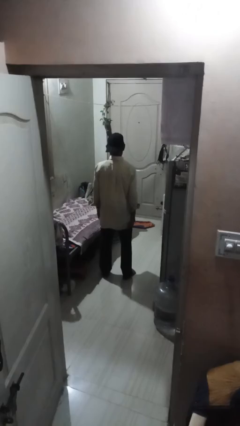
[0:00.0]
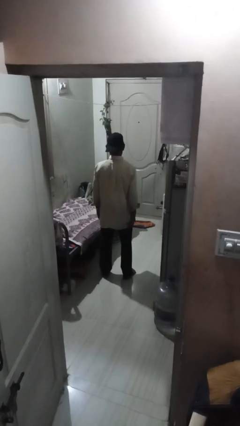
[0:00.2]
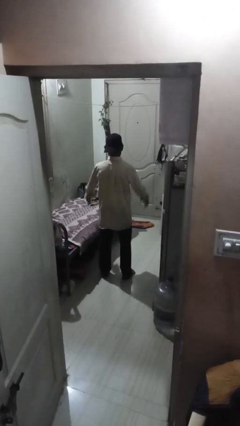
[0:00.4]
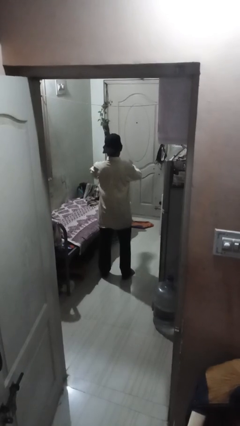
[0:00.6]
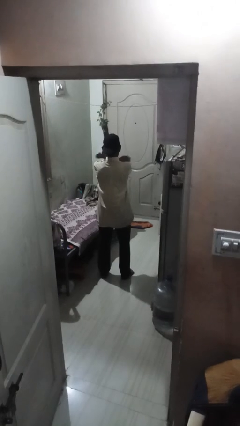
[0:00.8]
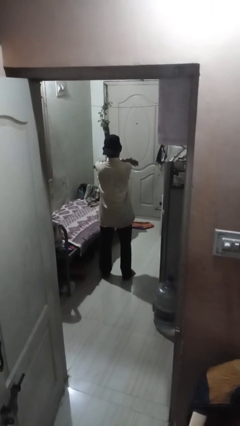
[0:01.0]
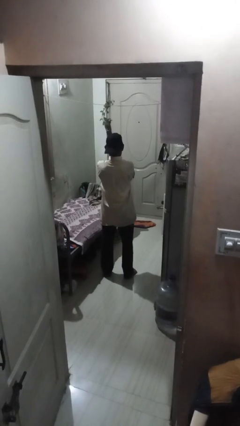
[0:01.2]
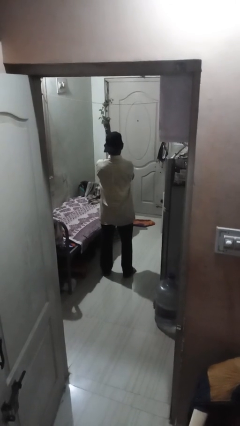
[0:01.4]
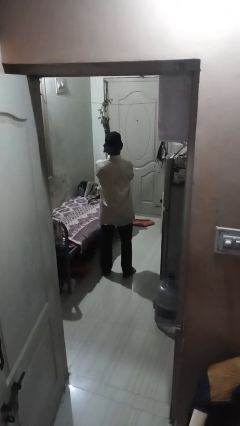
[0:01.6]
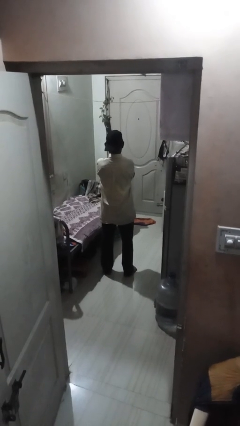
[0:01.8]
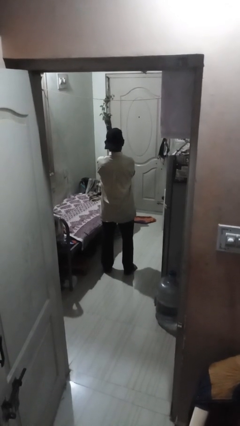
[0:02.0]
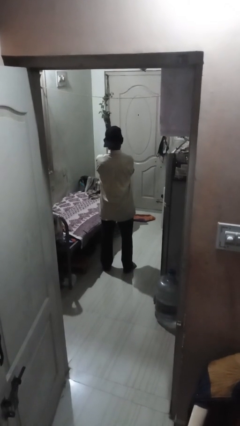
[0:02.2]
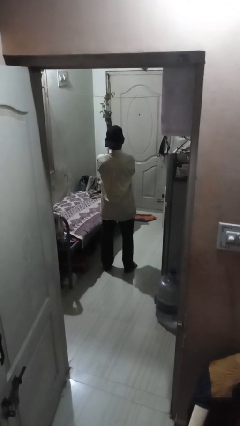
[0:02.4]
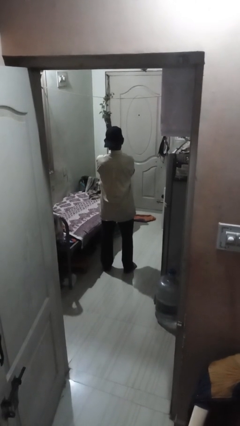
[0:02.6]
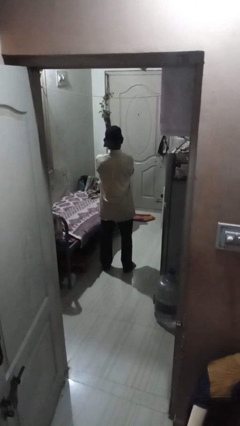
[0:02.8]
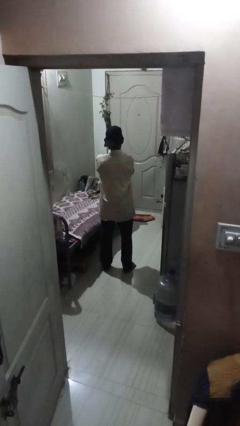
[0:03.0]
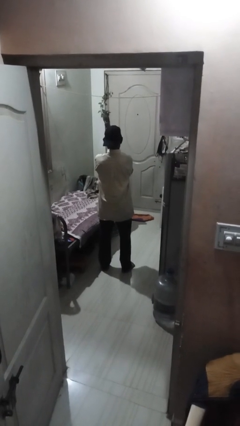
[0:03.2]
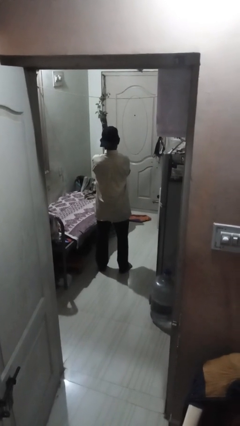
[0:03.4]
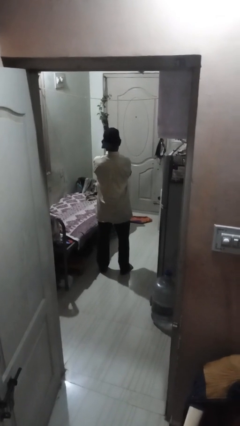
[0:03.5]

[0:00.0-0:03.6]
person crosses arms

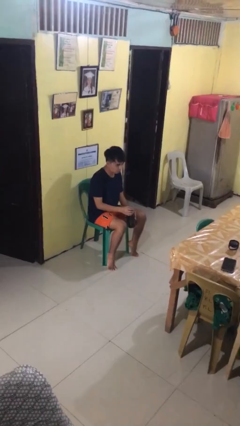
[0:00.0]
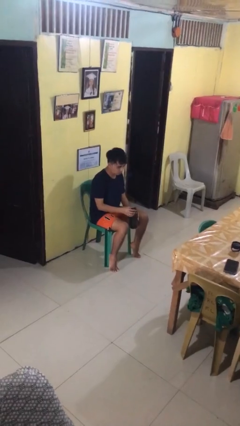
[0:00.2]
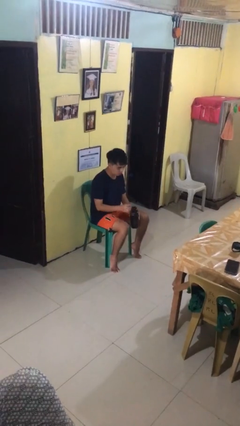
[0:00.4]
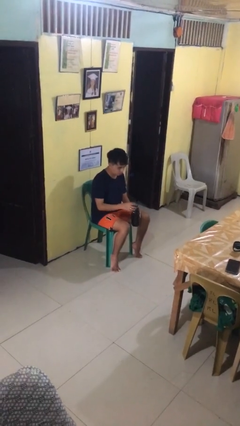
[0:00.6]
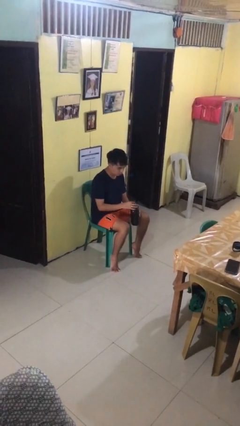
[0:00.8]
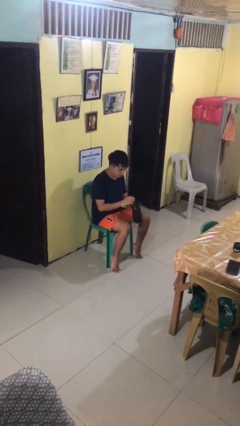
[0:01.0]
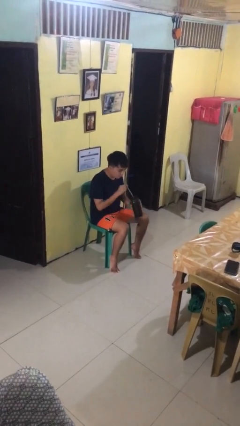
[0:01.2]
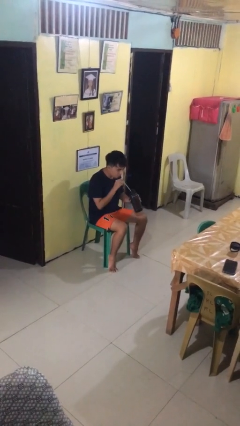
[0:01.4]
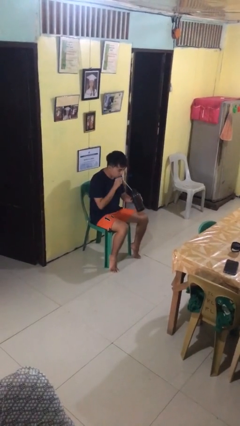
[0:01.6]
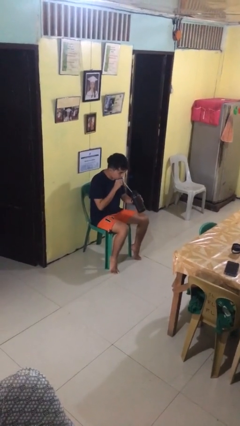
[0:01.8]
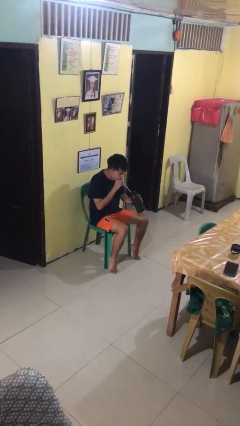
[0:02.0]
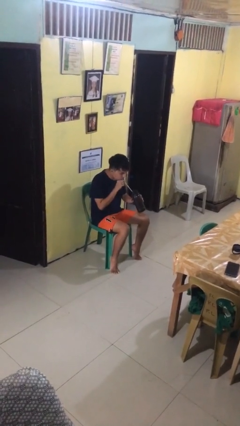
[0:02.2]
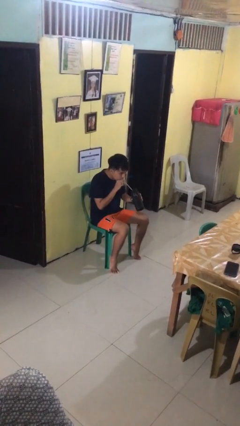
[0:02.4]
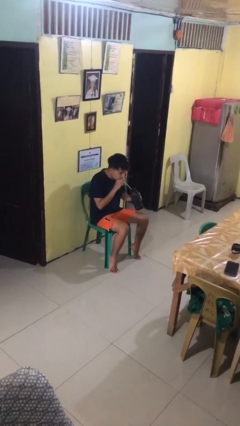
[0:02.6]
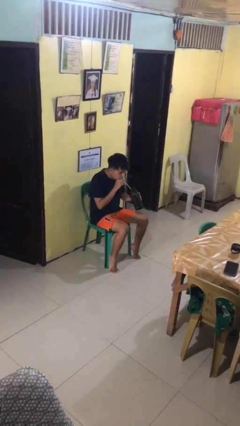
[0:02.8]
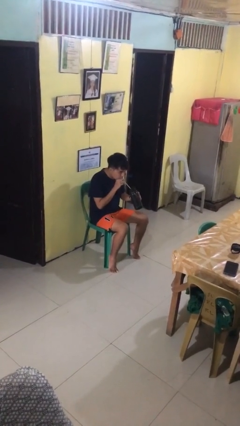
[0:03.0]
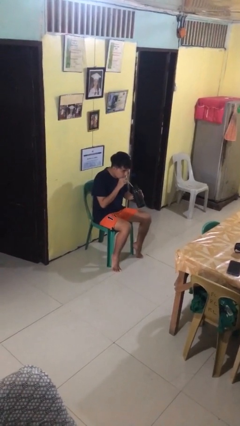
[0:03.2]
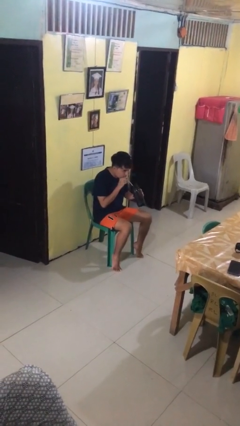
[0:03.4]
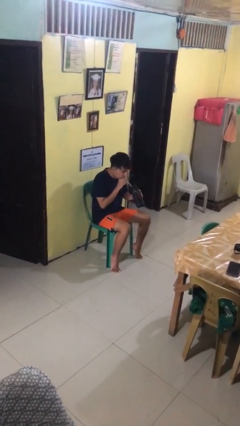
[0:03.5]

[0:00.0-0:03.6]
person drinks from straw

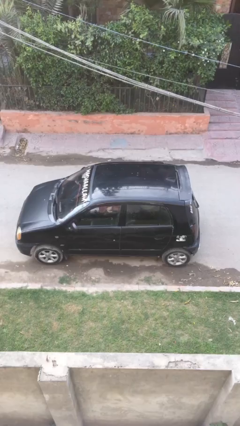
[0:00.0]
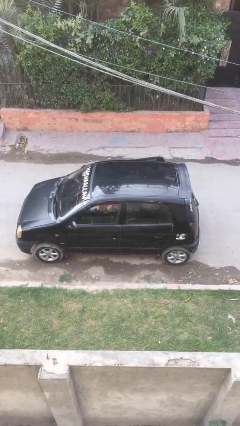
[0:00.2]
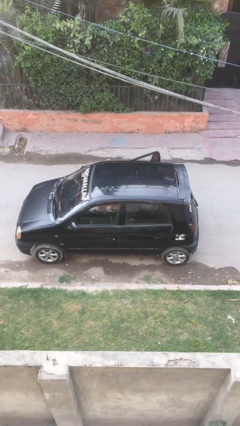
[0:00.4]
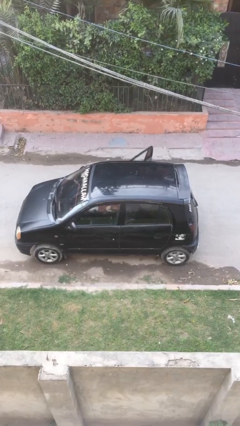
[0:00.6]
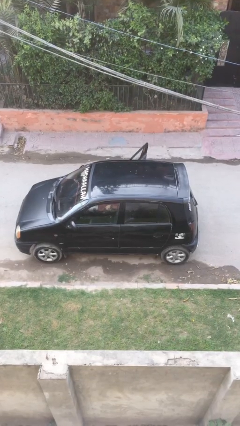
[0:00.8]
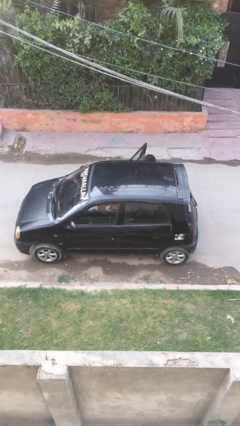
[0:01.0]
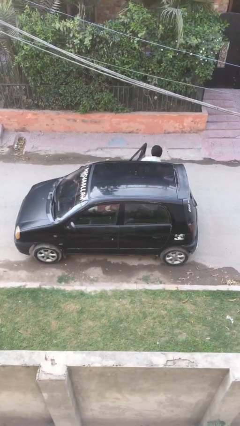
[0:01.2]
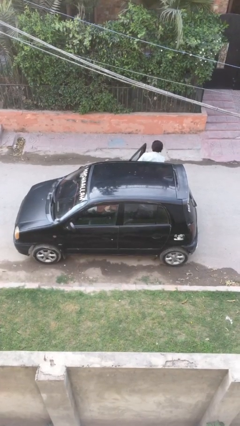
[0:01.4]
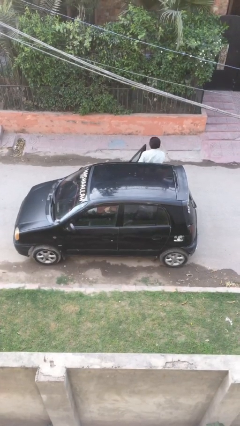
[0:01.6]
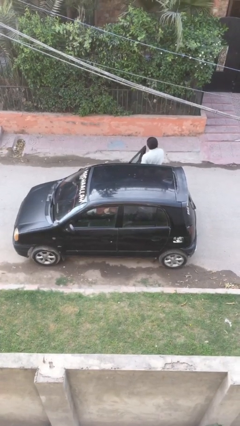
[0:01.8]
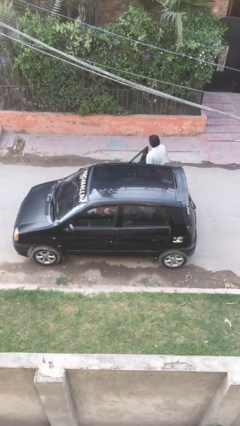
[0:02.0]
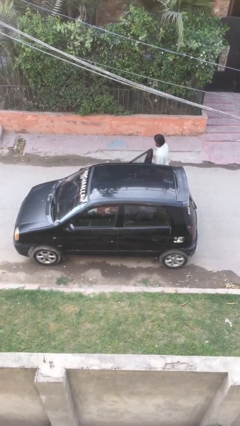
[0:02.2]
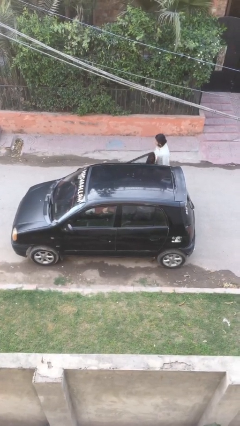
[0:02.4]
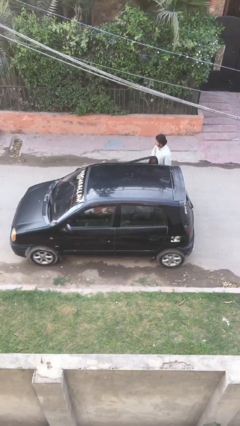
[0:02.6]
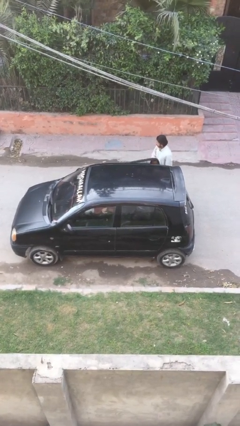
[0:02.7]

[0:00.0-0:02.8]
car drops off person

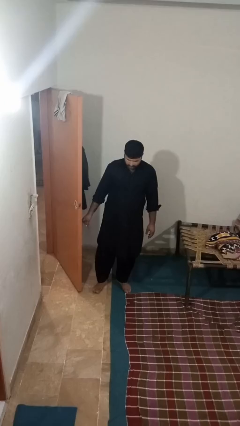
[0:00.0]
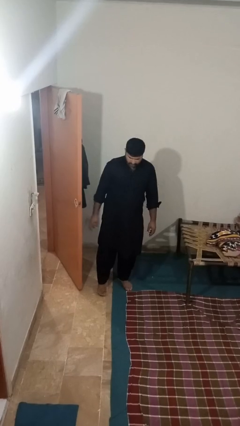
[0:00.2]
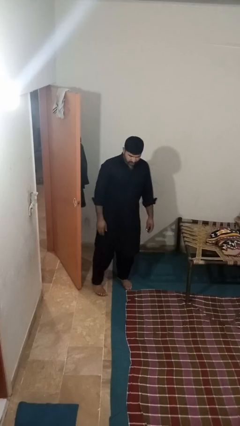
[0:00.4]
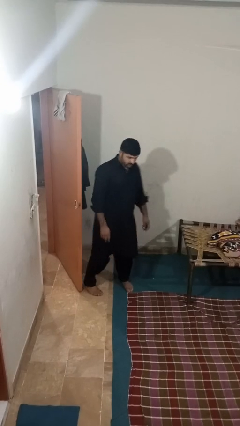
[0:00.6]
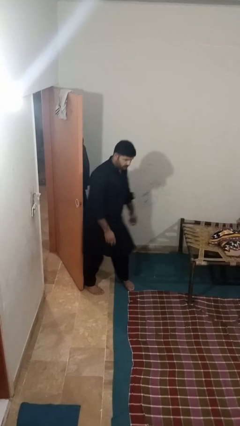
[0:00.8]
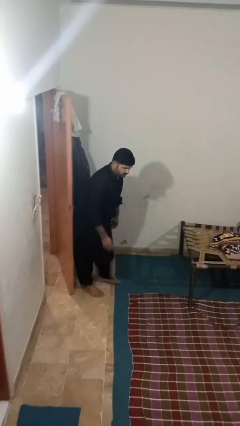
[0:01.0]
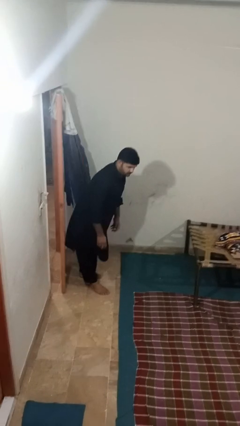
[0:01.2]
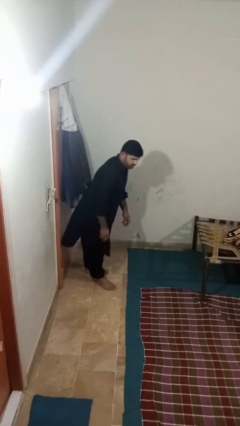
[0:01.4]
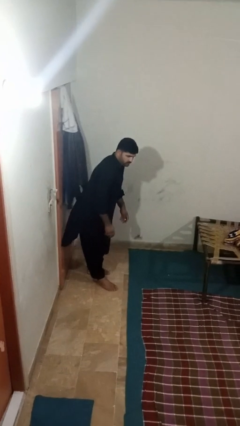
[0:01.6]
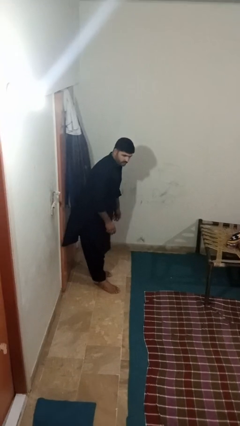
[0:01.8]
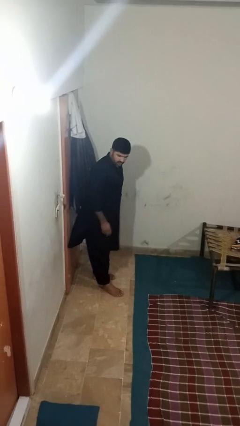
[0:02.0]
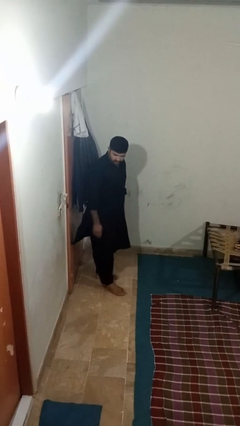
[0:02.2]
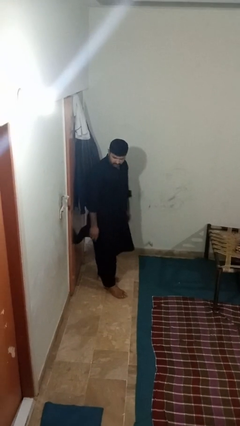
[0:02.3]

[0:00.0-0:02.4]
person closes door with hip

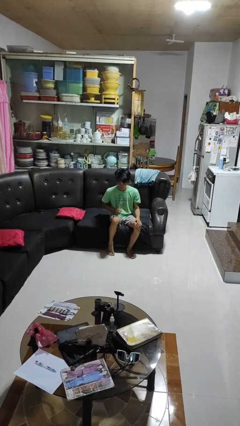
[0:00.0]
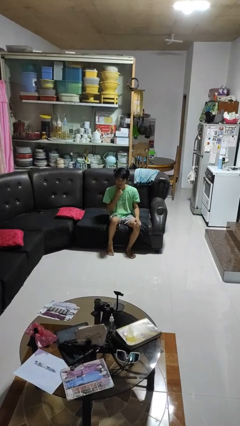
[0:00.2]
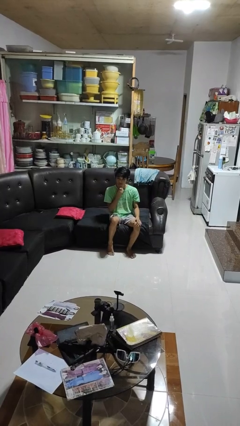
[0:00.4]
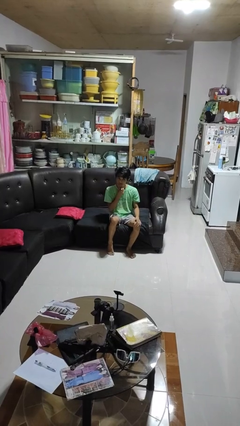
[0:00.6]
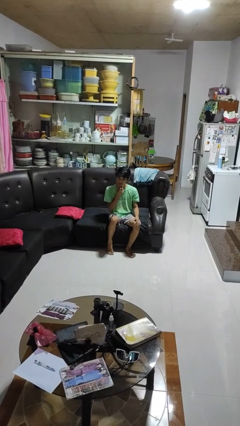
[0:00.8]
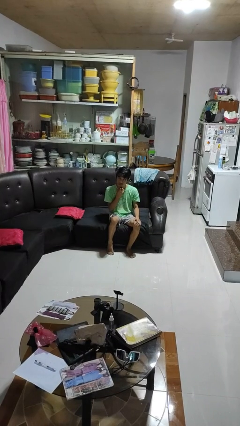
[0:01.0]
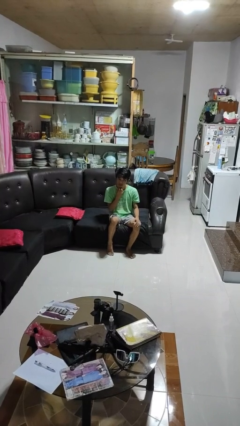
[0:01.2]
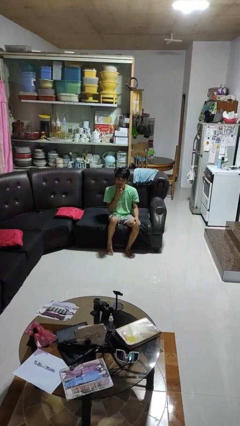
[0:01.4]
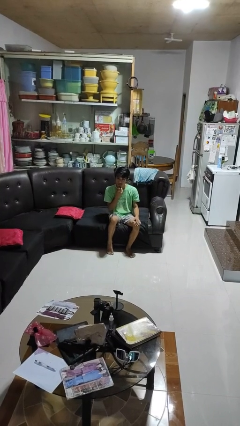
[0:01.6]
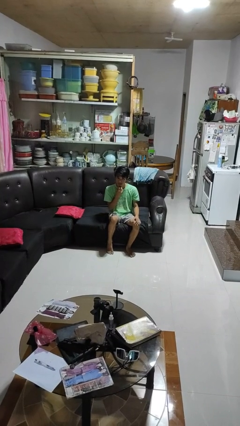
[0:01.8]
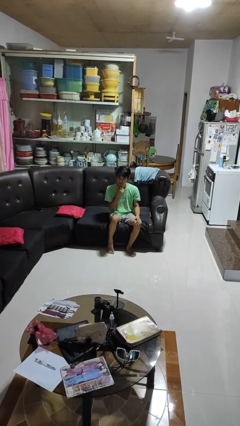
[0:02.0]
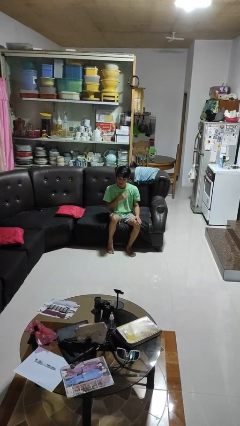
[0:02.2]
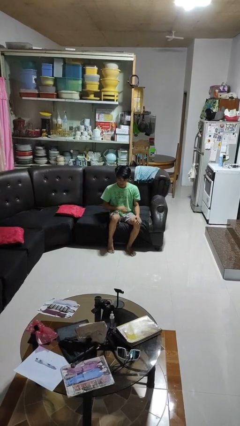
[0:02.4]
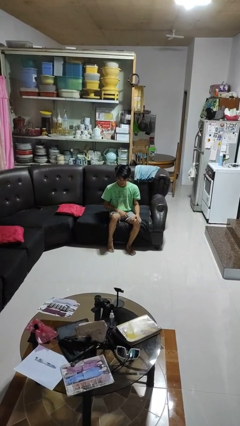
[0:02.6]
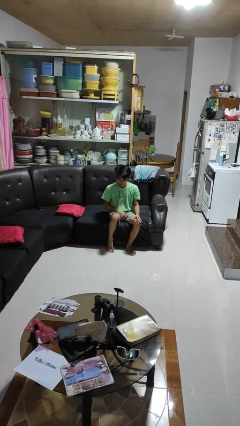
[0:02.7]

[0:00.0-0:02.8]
person scratches face

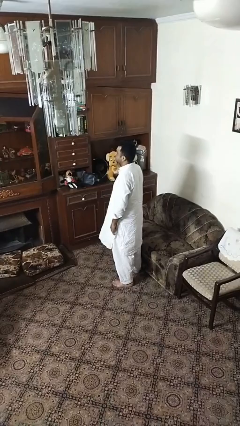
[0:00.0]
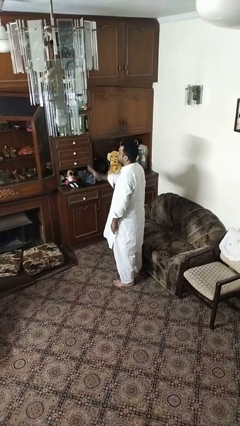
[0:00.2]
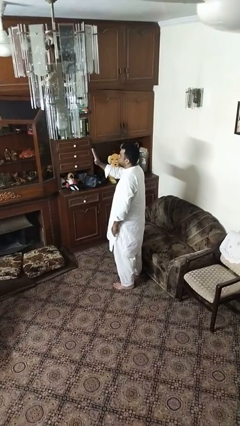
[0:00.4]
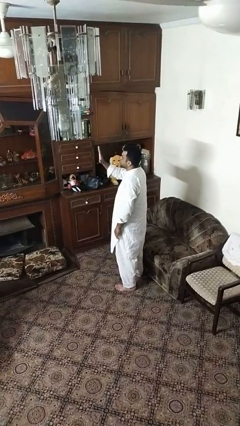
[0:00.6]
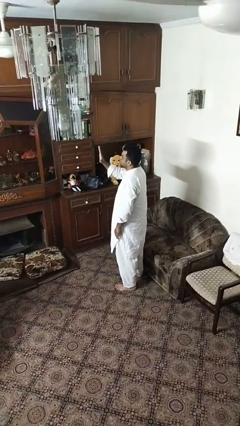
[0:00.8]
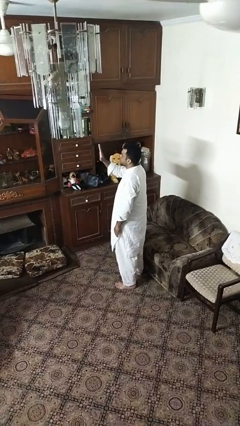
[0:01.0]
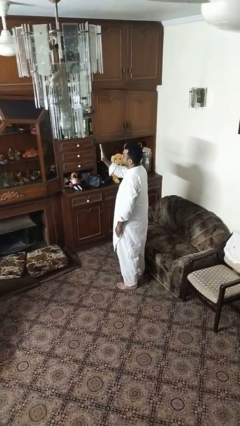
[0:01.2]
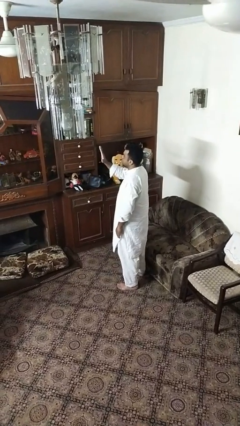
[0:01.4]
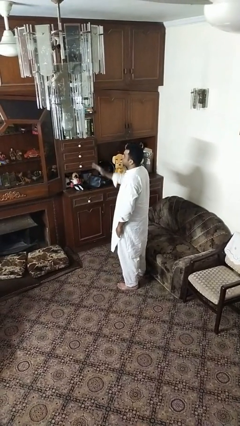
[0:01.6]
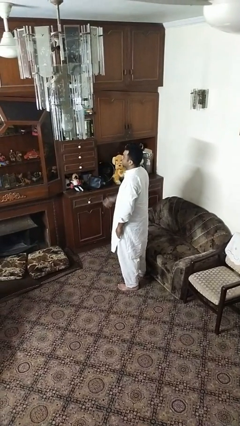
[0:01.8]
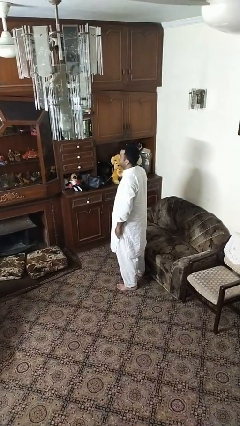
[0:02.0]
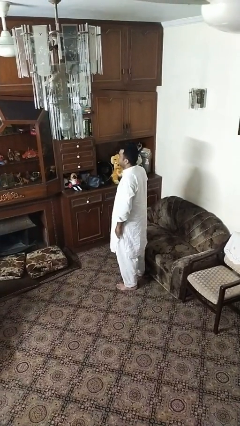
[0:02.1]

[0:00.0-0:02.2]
person gestures stop
